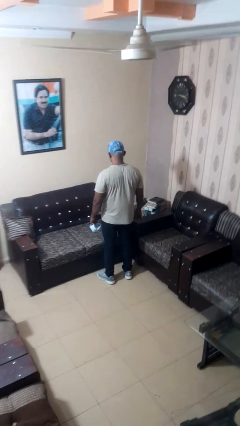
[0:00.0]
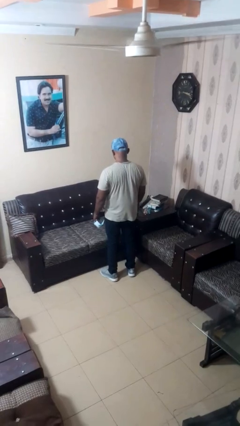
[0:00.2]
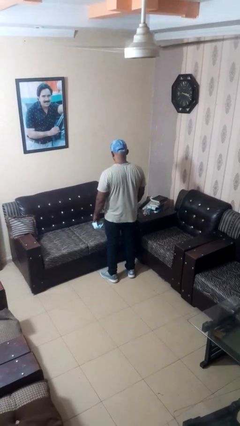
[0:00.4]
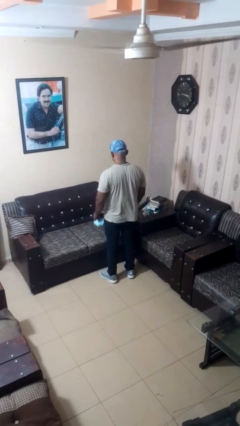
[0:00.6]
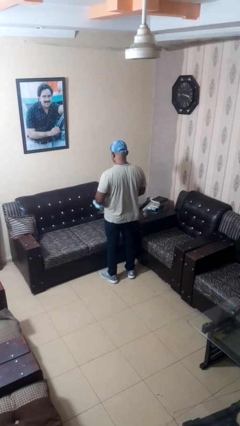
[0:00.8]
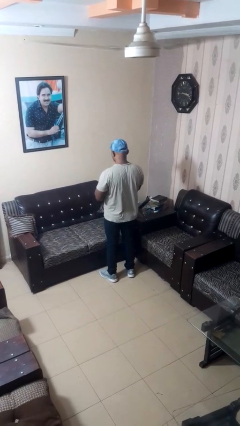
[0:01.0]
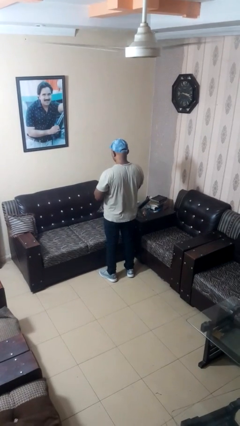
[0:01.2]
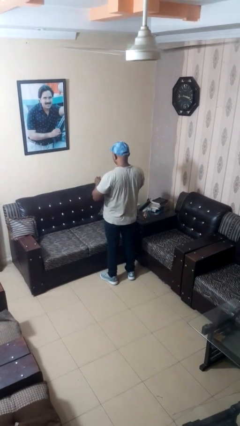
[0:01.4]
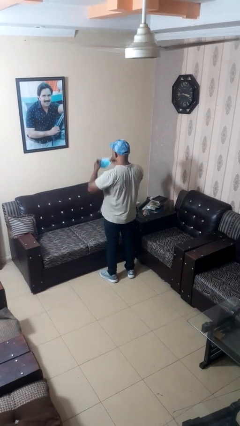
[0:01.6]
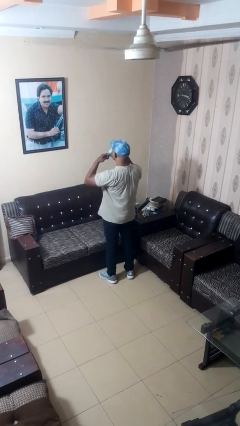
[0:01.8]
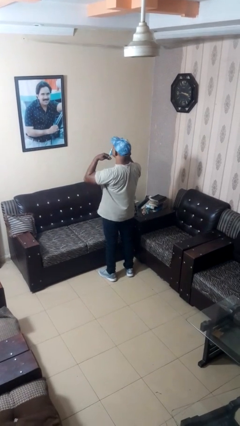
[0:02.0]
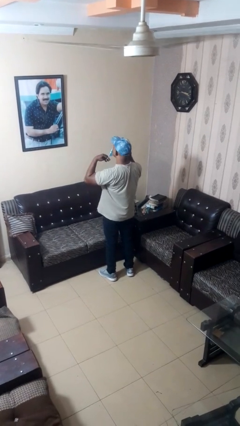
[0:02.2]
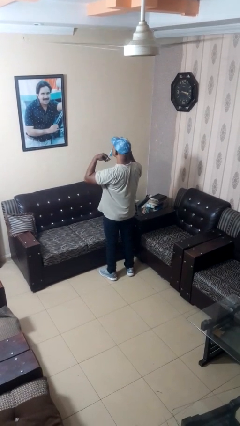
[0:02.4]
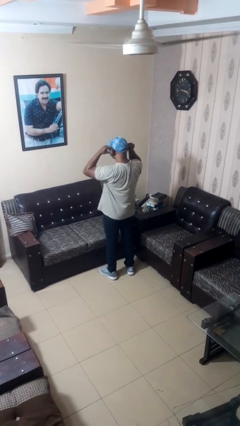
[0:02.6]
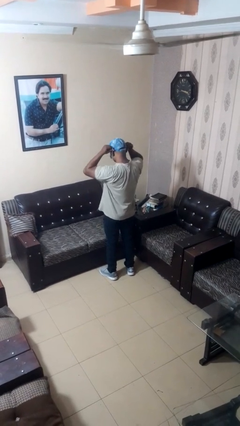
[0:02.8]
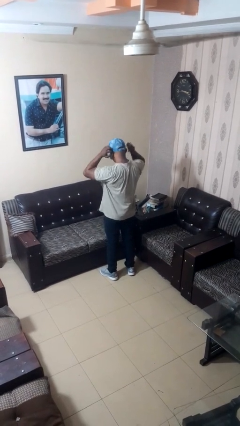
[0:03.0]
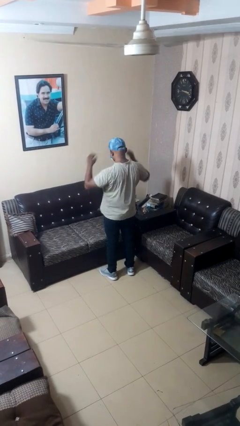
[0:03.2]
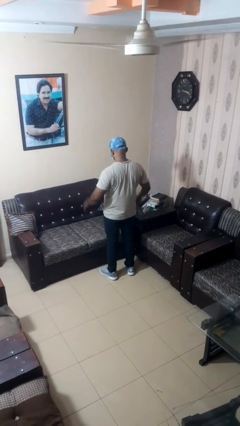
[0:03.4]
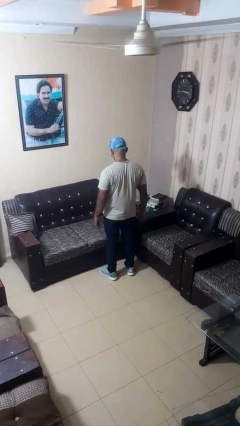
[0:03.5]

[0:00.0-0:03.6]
person puts on facemask

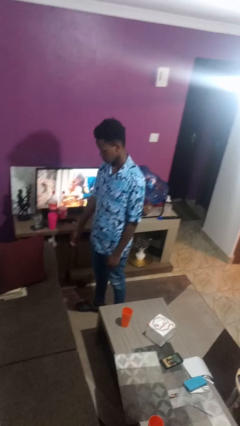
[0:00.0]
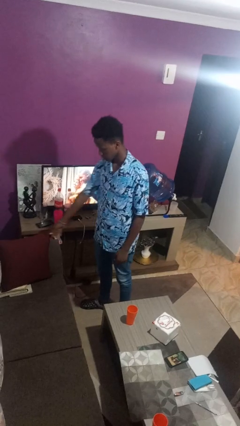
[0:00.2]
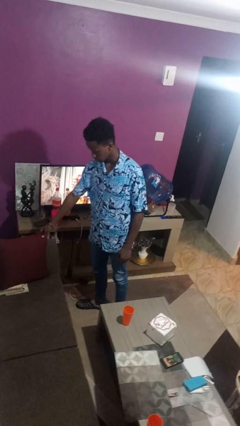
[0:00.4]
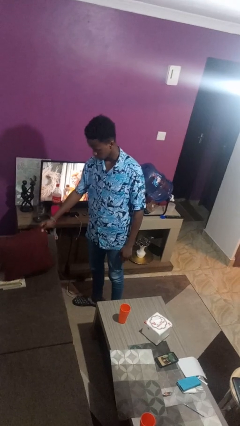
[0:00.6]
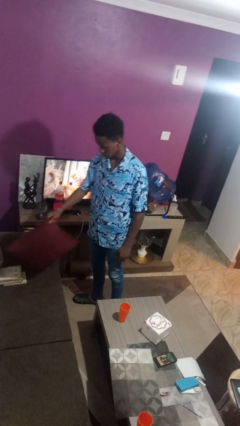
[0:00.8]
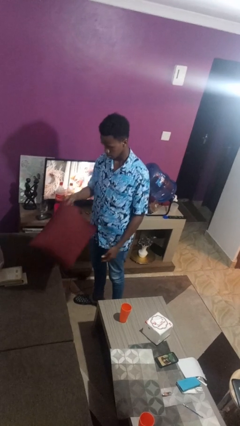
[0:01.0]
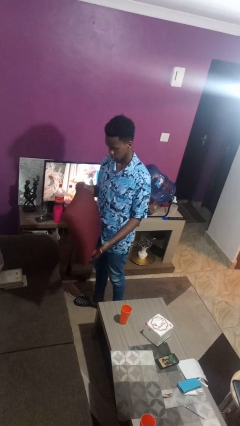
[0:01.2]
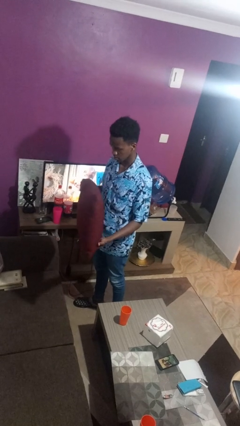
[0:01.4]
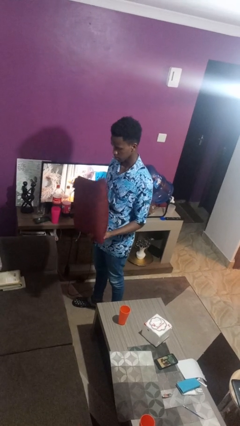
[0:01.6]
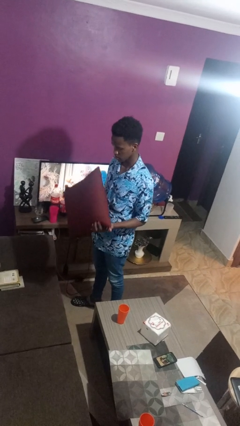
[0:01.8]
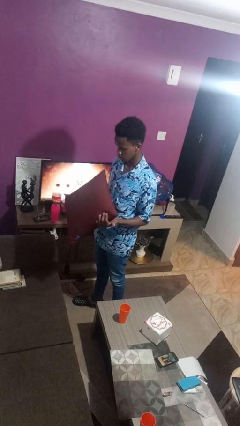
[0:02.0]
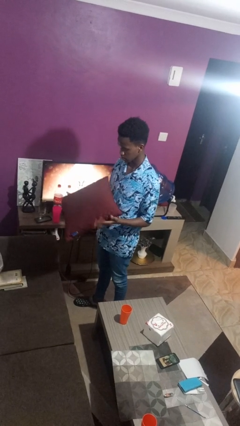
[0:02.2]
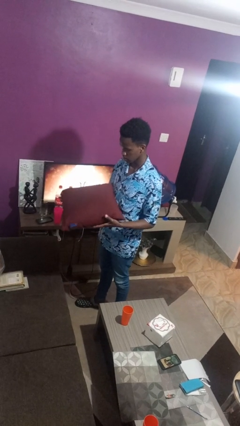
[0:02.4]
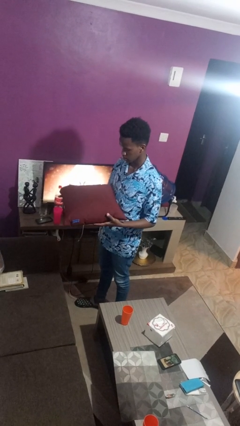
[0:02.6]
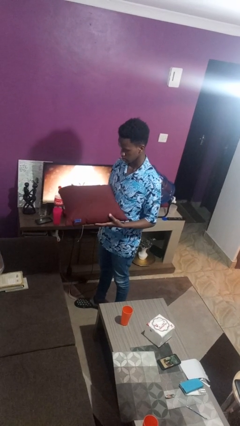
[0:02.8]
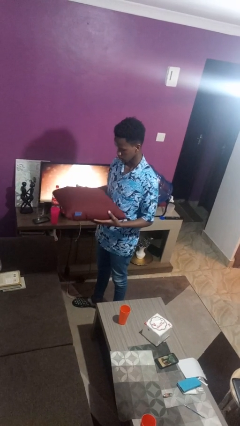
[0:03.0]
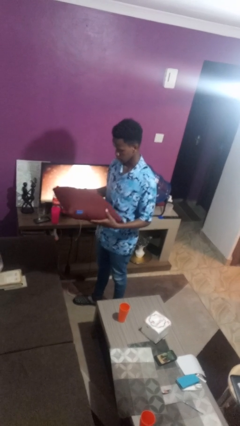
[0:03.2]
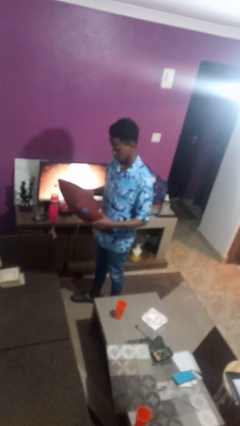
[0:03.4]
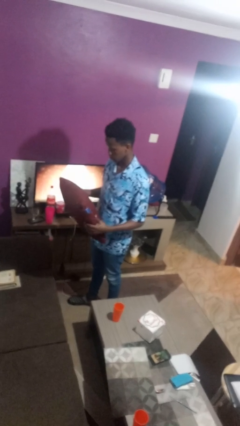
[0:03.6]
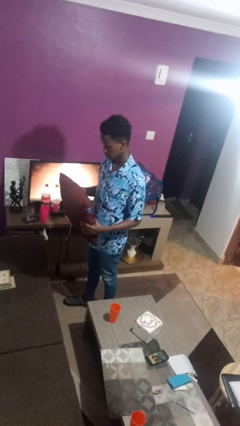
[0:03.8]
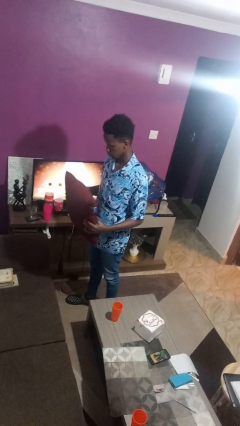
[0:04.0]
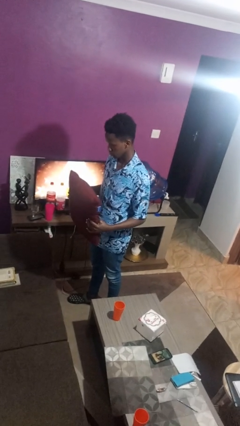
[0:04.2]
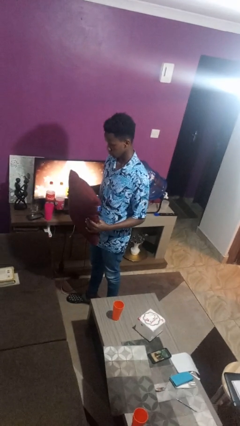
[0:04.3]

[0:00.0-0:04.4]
person picks up object from couch

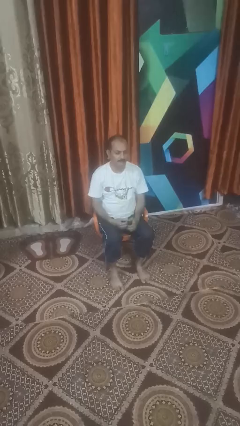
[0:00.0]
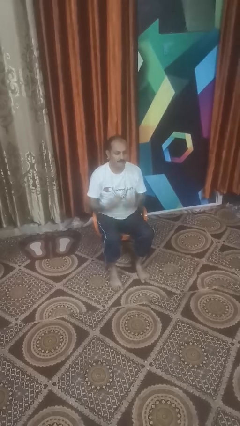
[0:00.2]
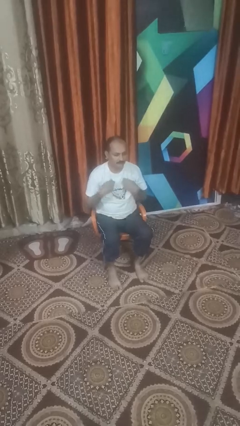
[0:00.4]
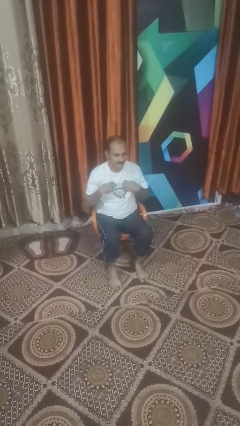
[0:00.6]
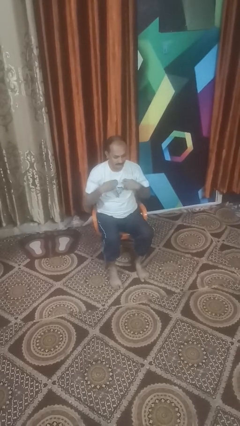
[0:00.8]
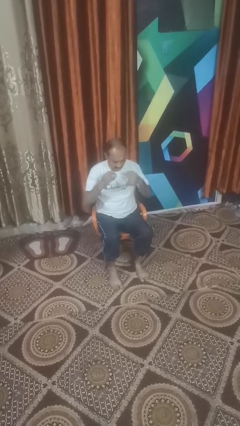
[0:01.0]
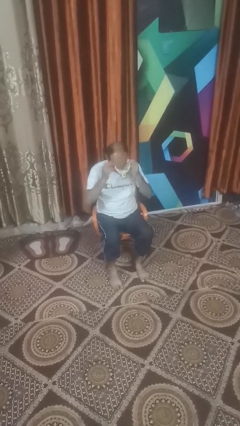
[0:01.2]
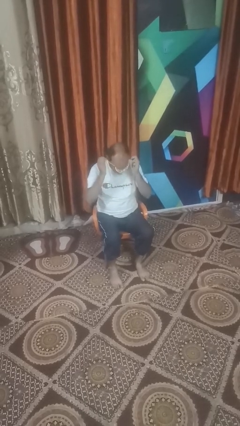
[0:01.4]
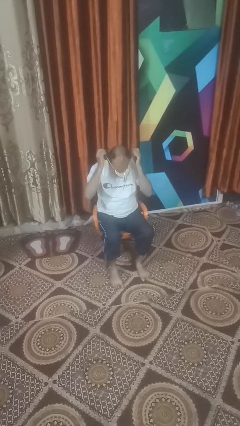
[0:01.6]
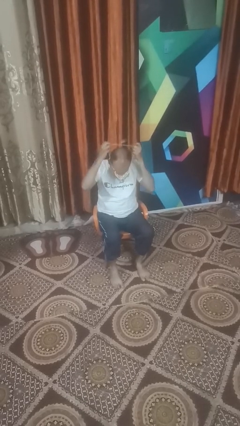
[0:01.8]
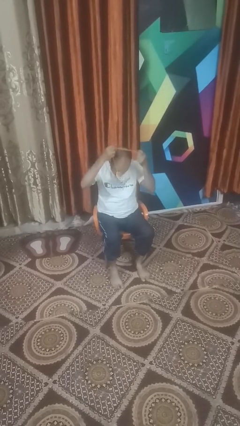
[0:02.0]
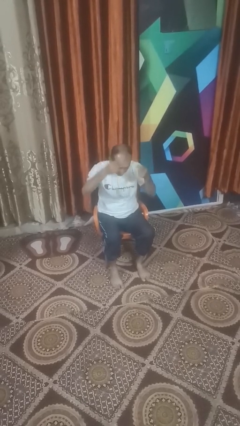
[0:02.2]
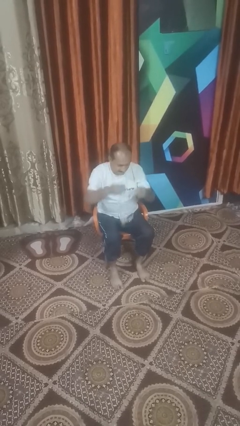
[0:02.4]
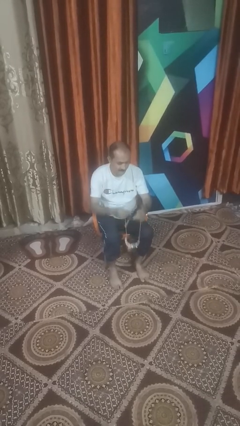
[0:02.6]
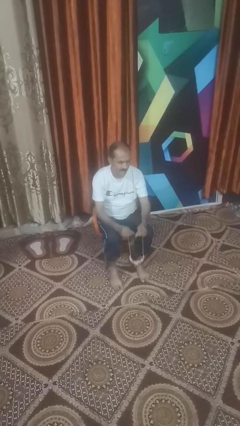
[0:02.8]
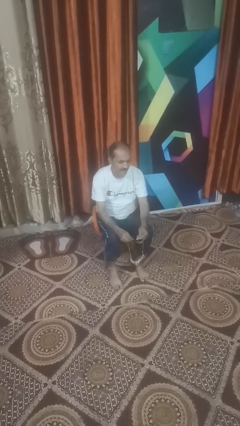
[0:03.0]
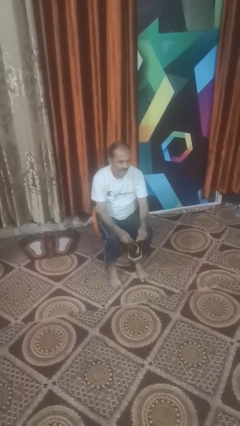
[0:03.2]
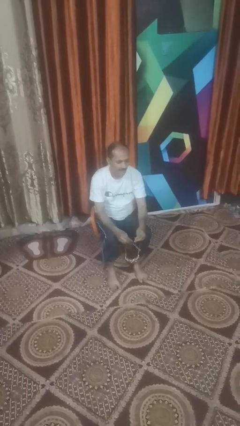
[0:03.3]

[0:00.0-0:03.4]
person takes off necklace

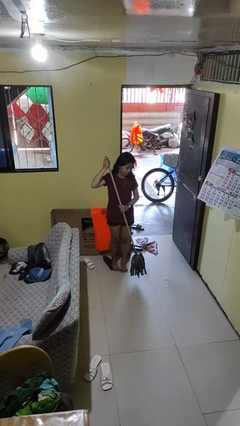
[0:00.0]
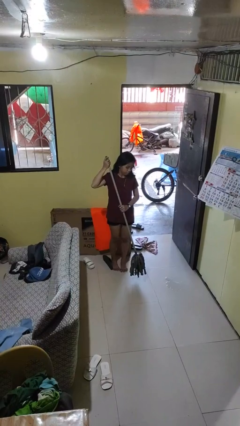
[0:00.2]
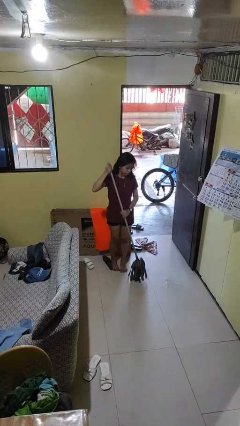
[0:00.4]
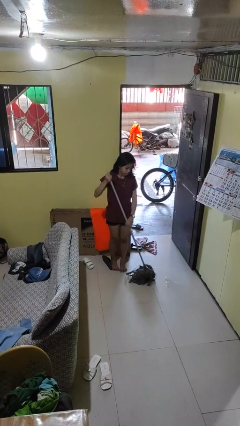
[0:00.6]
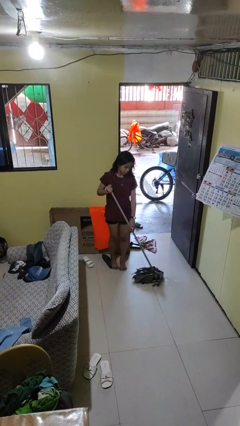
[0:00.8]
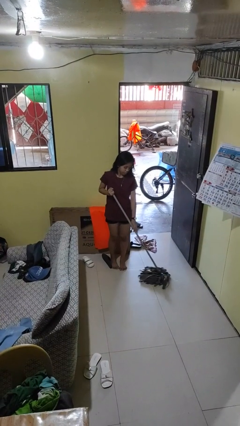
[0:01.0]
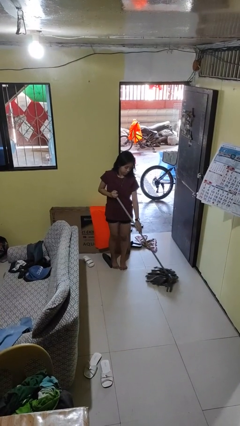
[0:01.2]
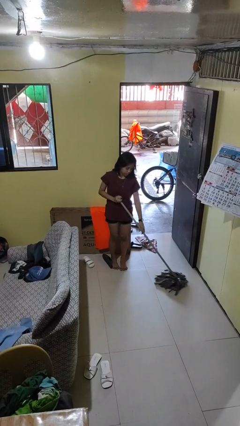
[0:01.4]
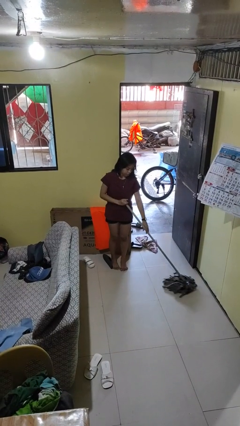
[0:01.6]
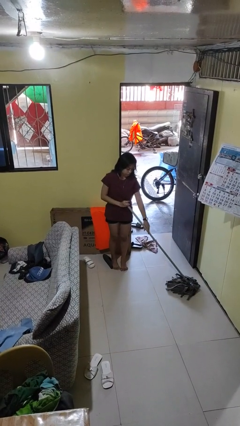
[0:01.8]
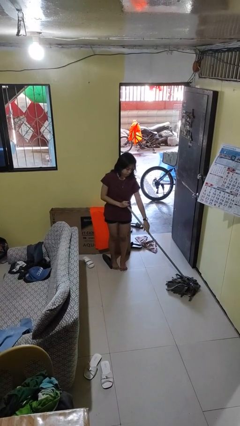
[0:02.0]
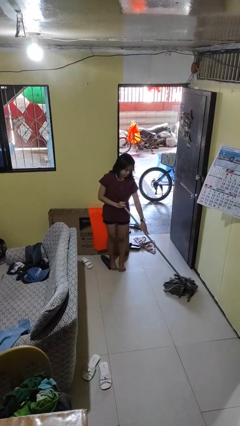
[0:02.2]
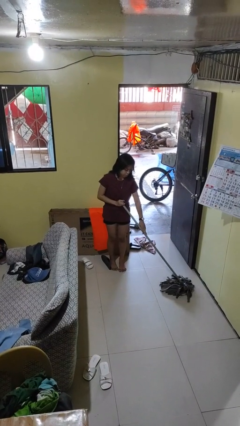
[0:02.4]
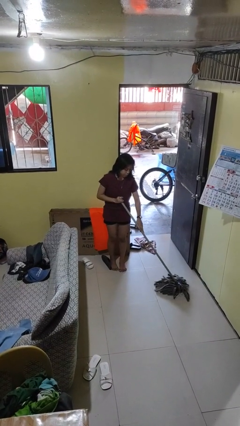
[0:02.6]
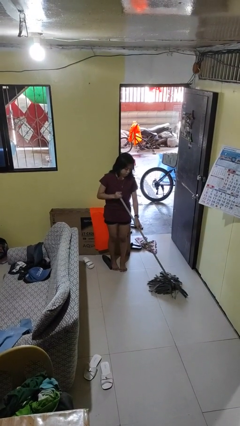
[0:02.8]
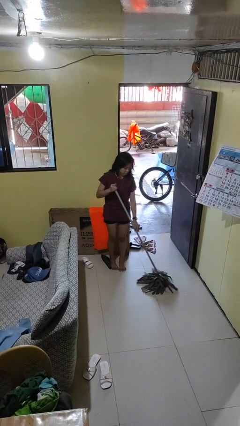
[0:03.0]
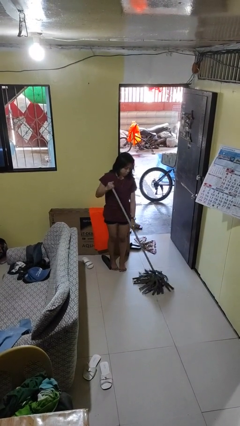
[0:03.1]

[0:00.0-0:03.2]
person mops

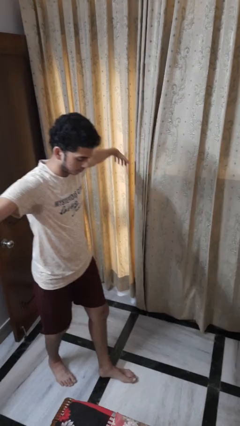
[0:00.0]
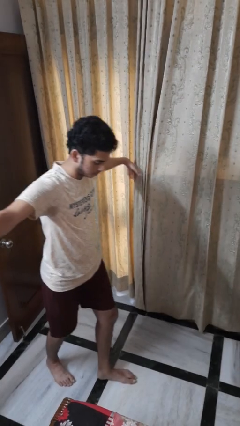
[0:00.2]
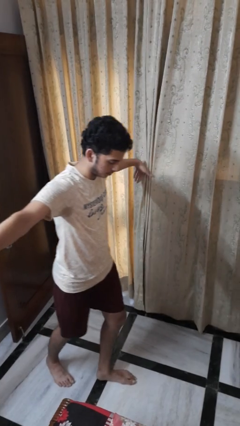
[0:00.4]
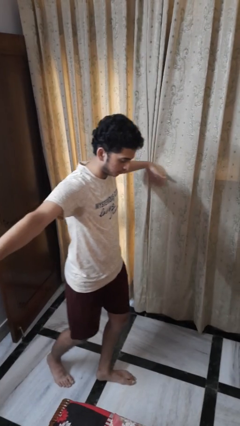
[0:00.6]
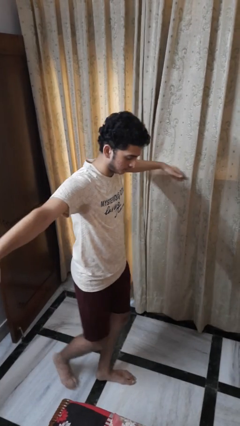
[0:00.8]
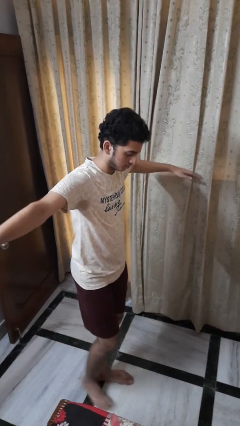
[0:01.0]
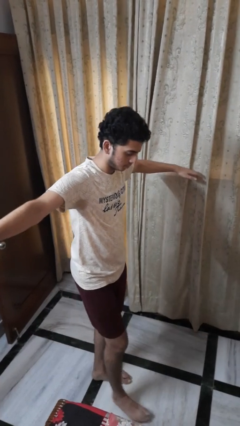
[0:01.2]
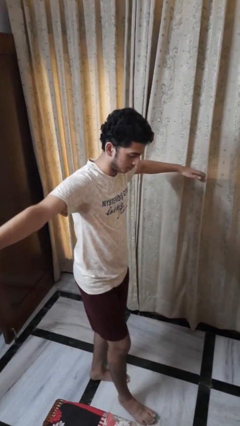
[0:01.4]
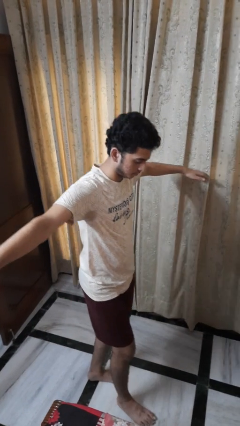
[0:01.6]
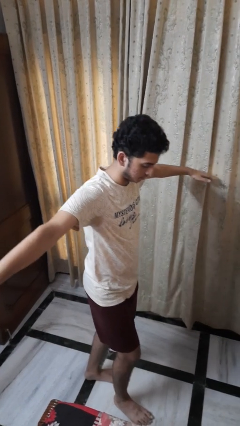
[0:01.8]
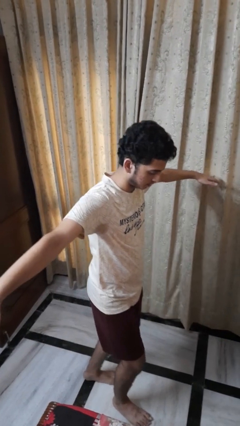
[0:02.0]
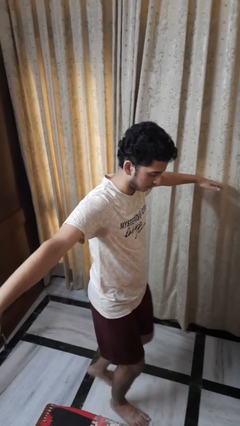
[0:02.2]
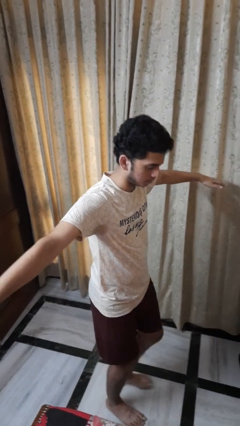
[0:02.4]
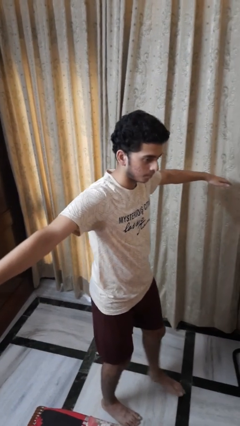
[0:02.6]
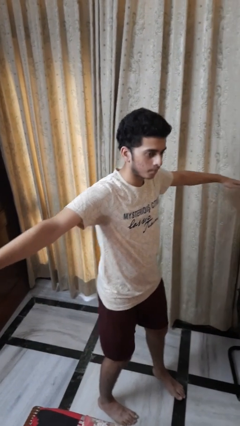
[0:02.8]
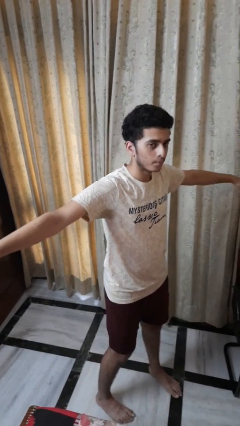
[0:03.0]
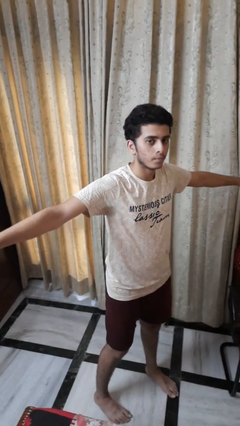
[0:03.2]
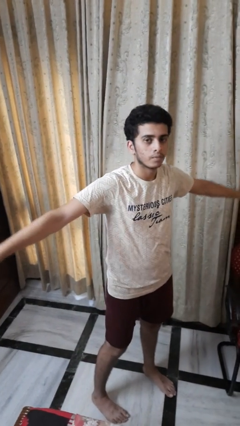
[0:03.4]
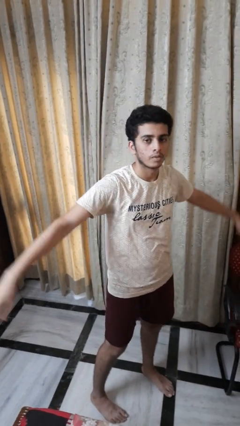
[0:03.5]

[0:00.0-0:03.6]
person walks tiptoe
